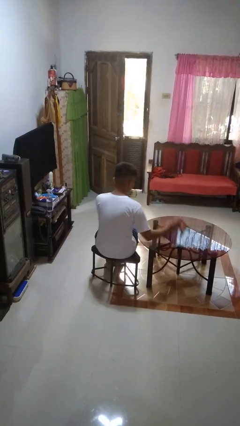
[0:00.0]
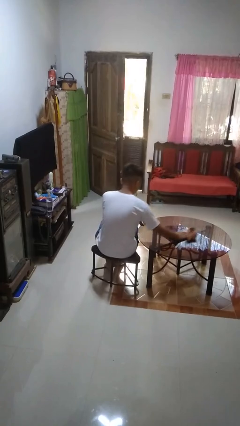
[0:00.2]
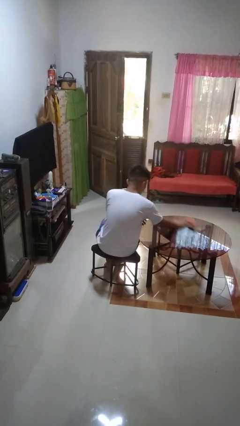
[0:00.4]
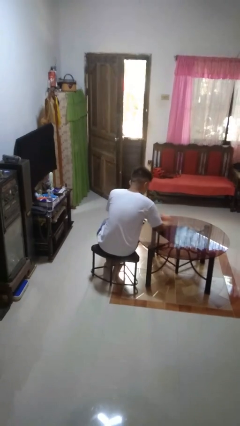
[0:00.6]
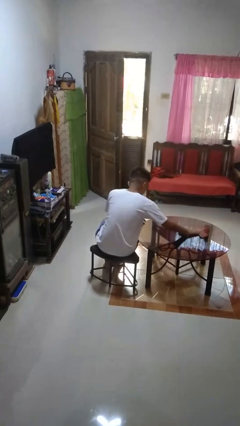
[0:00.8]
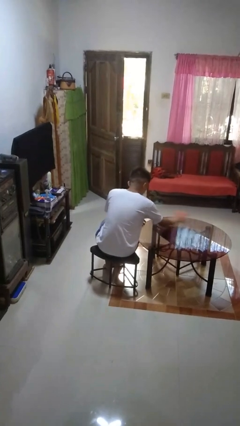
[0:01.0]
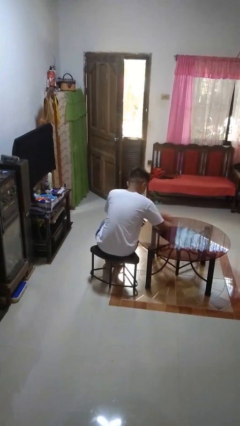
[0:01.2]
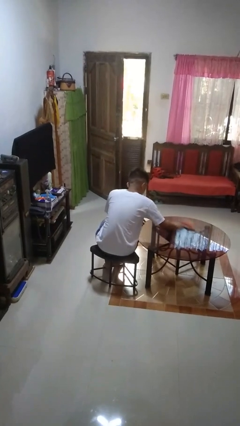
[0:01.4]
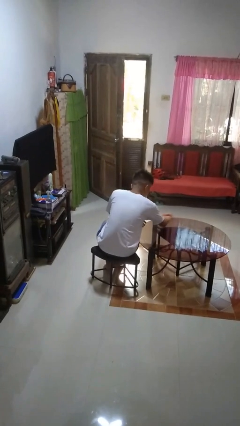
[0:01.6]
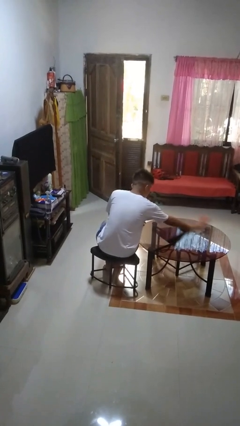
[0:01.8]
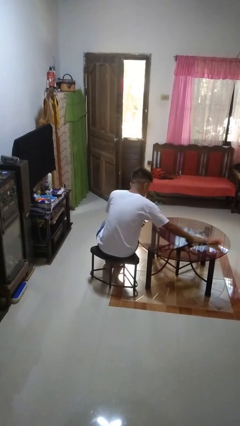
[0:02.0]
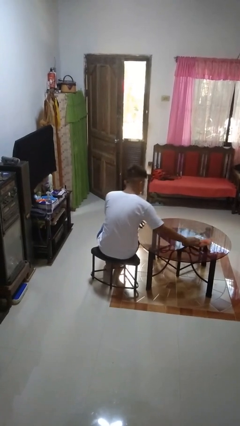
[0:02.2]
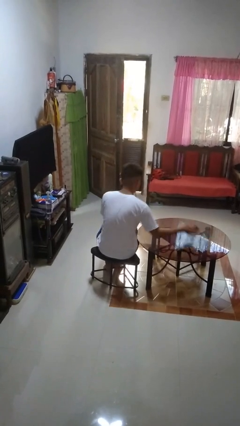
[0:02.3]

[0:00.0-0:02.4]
person cleans table with rag

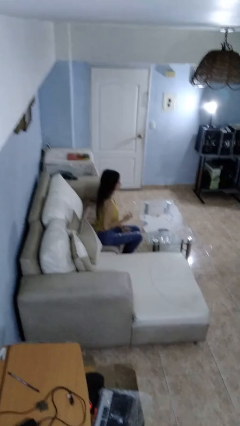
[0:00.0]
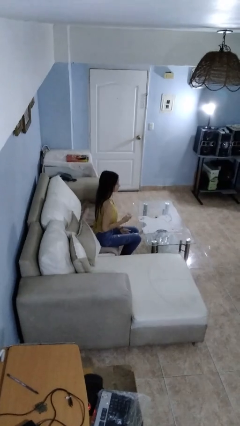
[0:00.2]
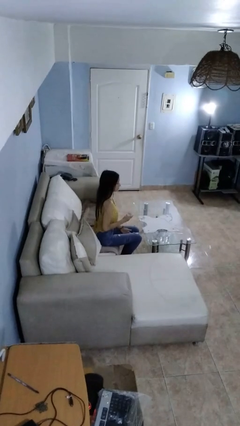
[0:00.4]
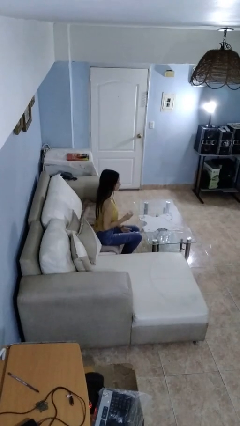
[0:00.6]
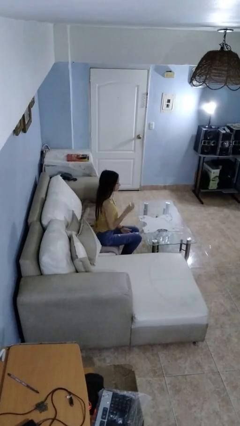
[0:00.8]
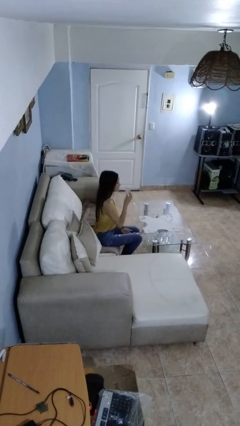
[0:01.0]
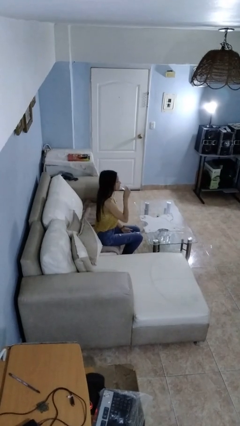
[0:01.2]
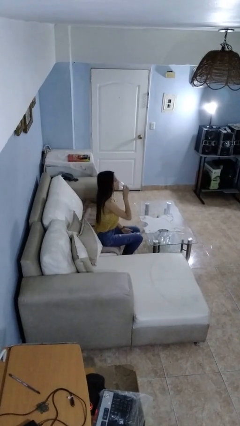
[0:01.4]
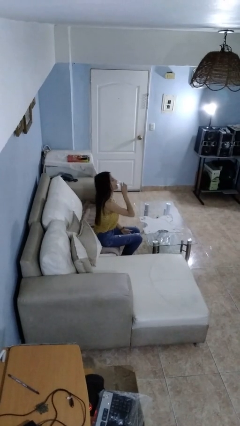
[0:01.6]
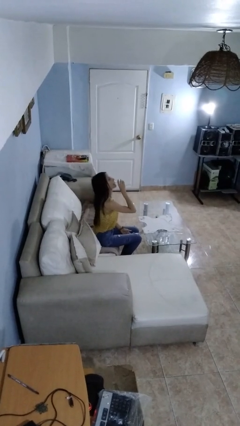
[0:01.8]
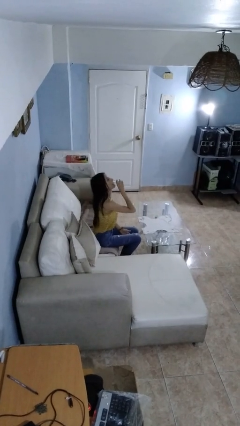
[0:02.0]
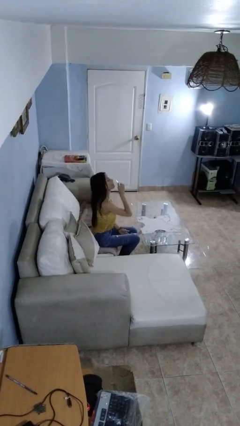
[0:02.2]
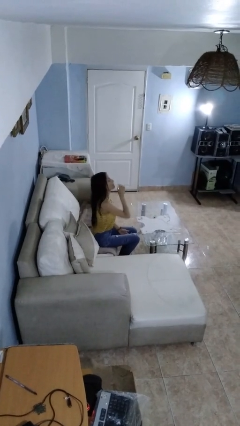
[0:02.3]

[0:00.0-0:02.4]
person drinks from shotglass

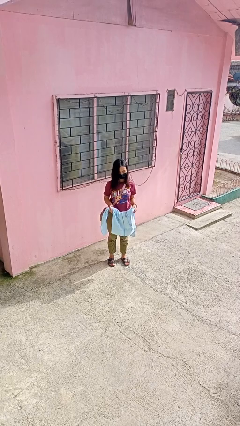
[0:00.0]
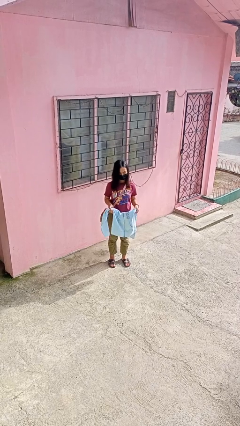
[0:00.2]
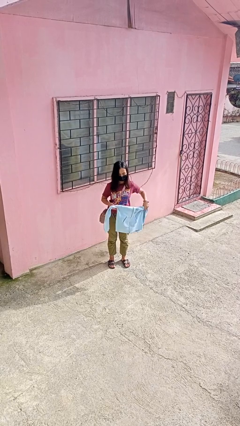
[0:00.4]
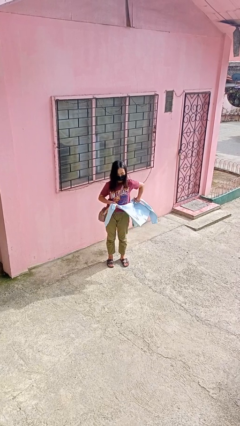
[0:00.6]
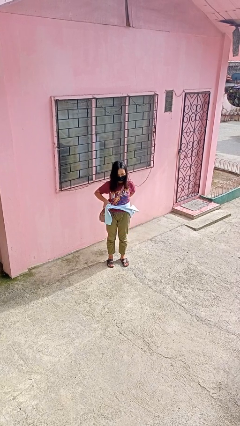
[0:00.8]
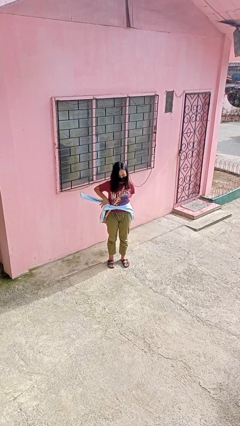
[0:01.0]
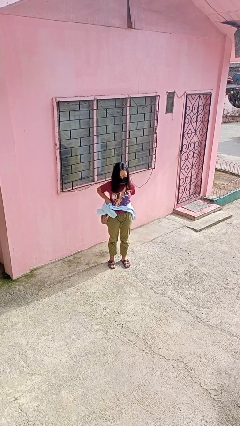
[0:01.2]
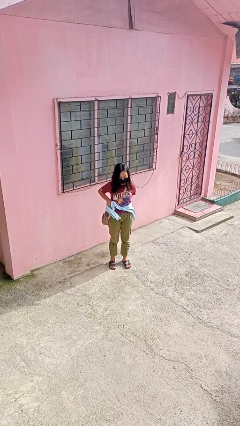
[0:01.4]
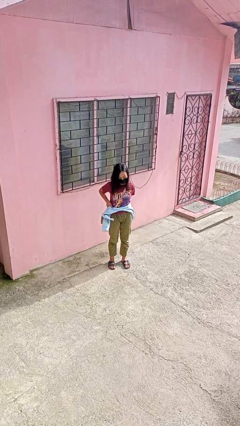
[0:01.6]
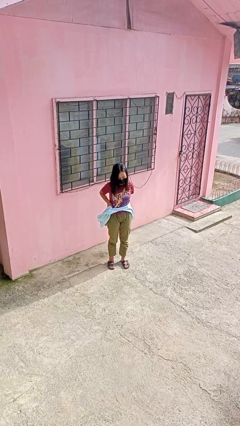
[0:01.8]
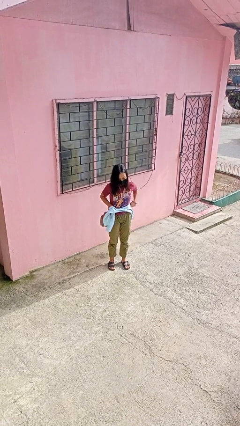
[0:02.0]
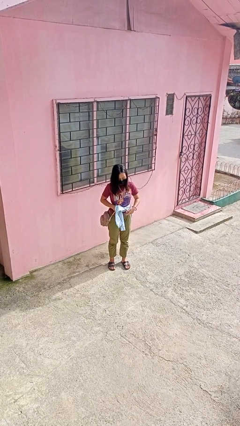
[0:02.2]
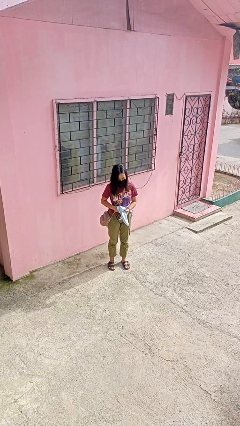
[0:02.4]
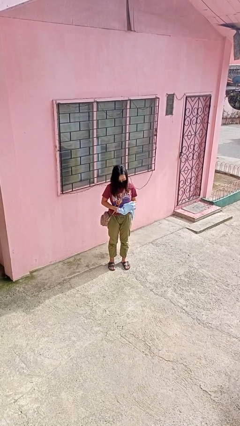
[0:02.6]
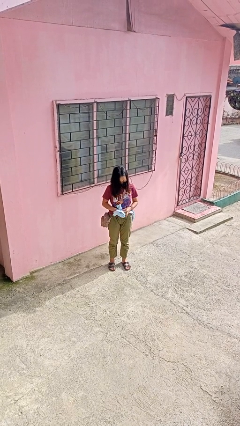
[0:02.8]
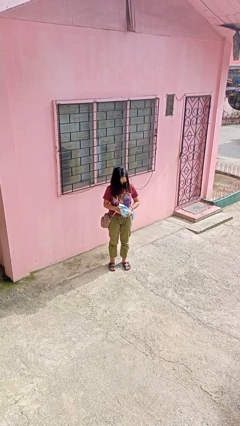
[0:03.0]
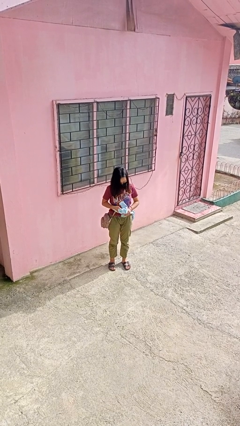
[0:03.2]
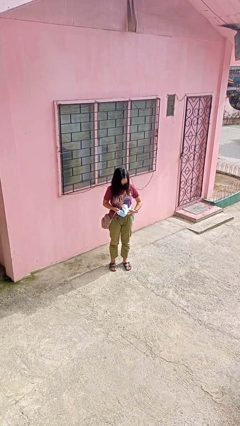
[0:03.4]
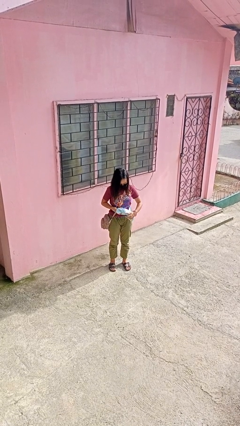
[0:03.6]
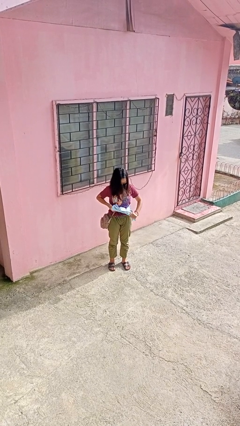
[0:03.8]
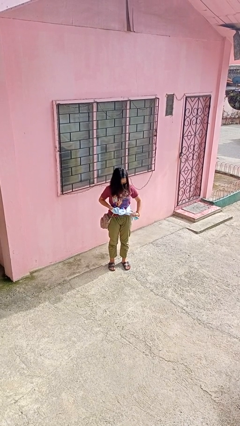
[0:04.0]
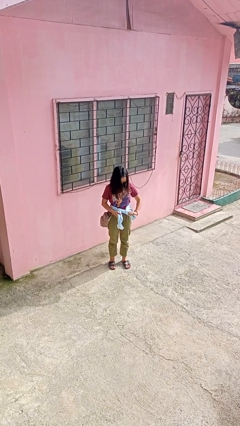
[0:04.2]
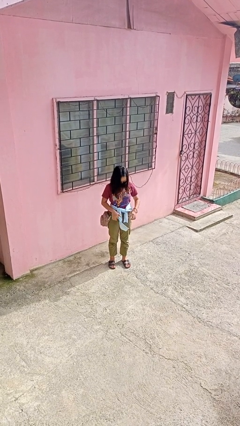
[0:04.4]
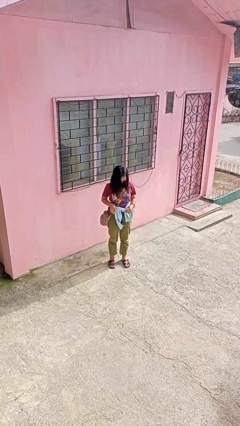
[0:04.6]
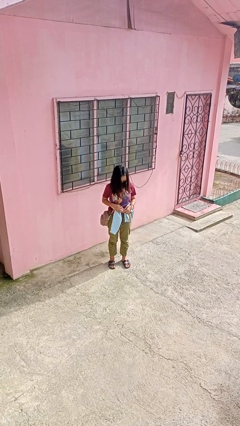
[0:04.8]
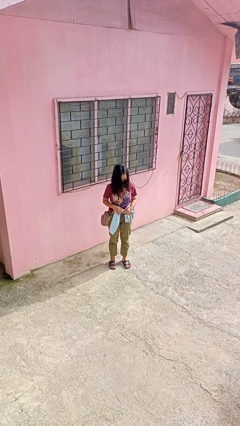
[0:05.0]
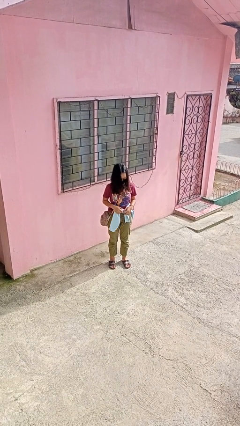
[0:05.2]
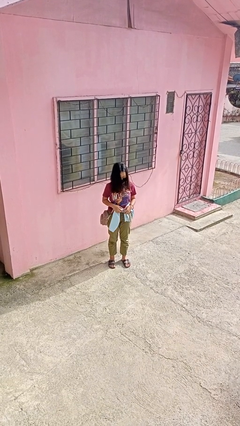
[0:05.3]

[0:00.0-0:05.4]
person ties jacket around waist

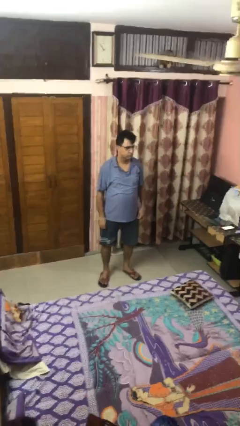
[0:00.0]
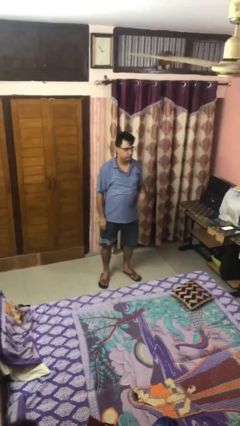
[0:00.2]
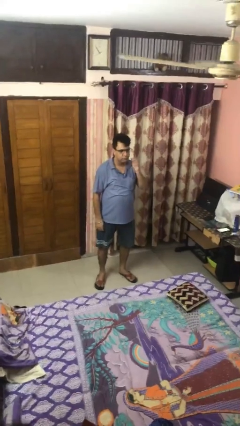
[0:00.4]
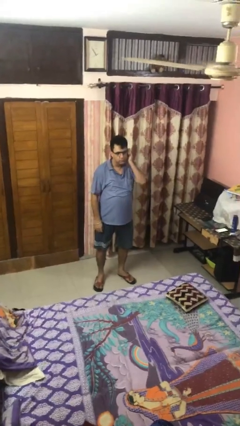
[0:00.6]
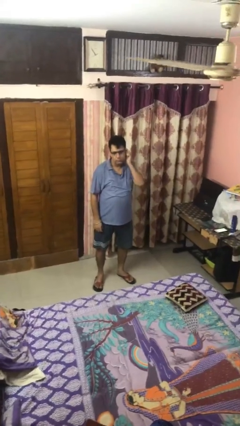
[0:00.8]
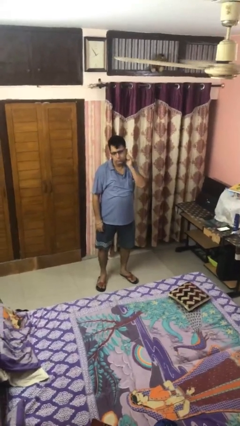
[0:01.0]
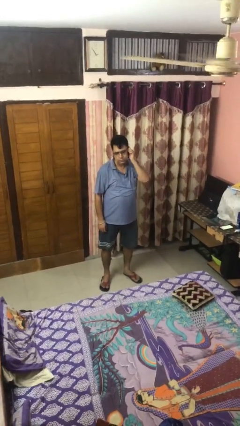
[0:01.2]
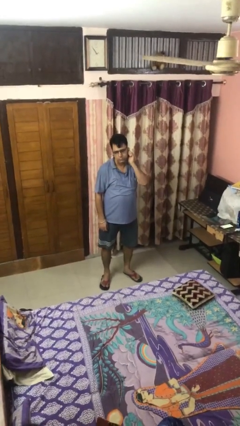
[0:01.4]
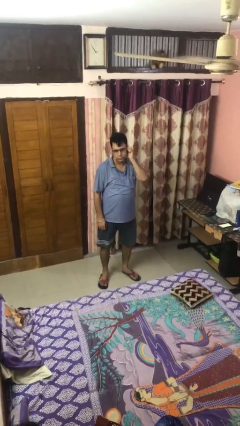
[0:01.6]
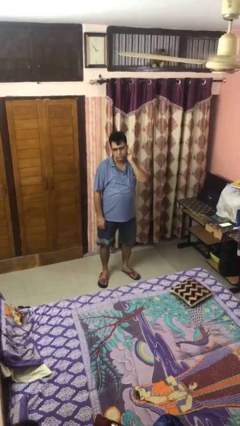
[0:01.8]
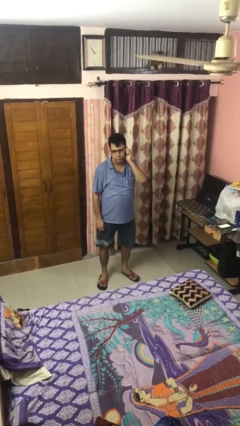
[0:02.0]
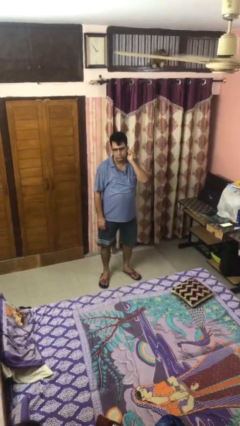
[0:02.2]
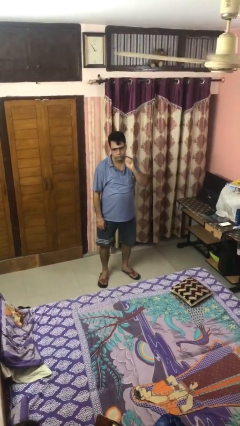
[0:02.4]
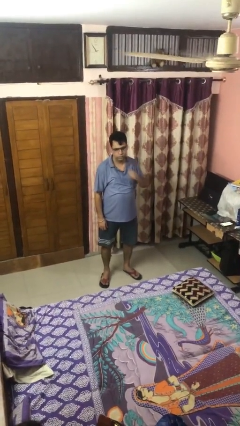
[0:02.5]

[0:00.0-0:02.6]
person touches earlobe

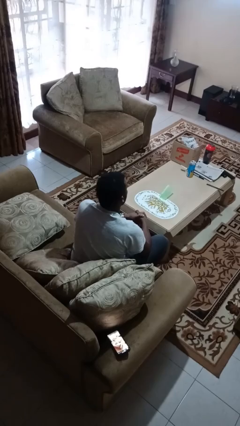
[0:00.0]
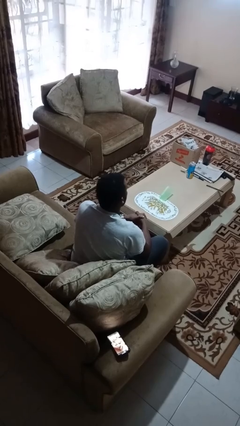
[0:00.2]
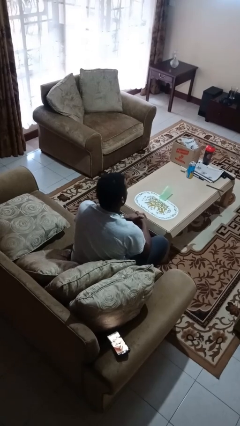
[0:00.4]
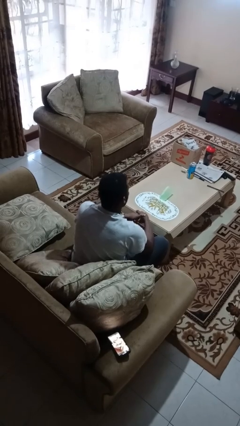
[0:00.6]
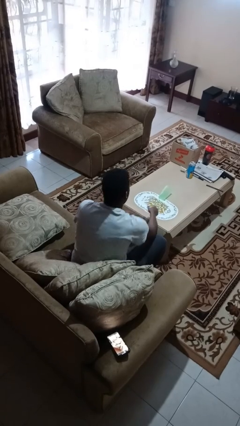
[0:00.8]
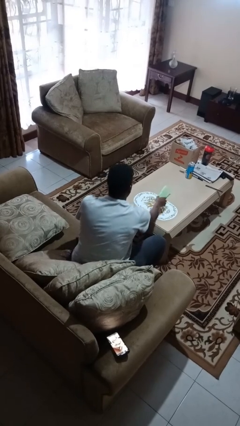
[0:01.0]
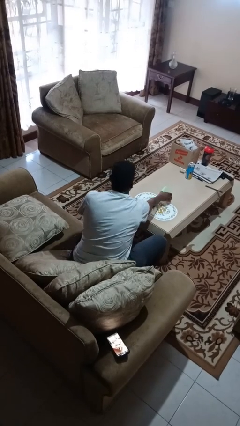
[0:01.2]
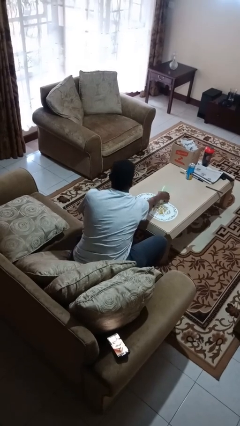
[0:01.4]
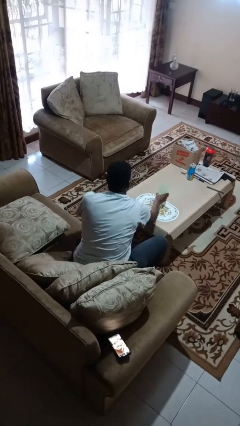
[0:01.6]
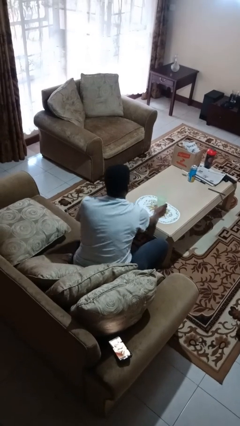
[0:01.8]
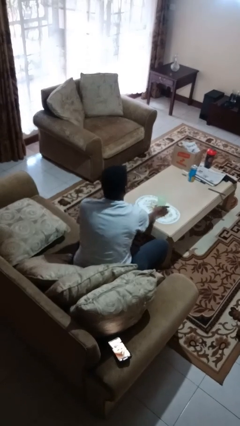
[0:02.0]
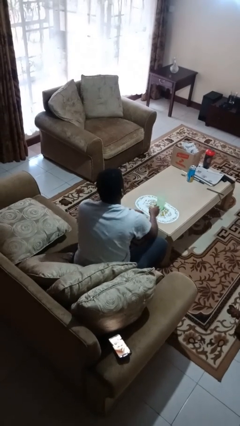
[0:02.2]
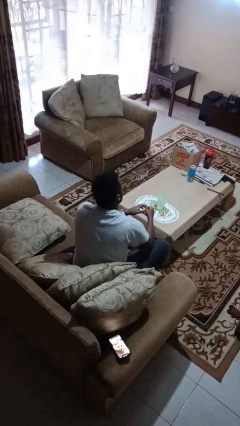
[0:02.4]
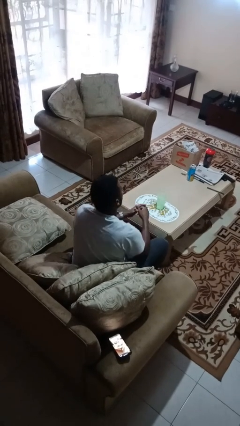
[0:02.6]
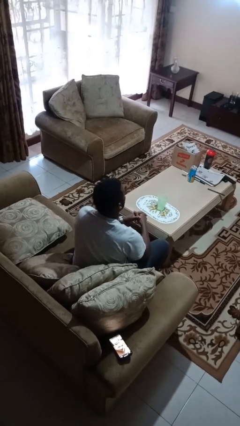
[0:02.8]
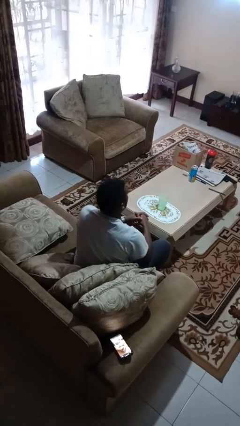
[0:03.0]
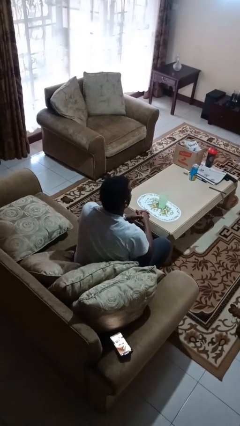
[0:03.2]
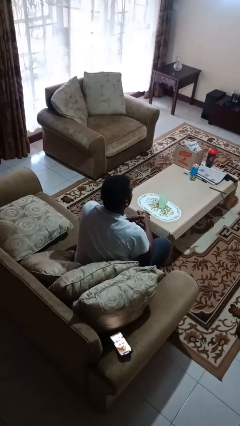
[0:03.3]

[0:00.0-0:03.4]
person sets upright glass

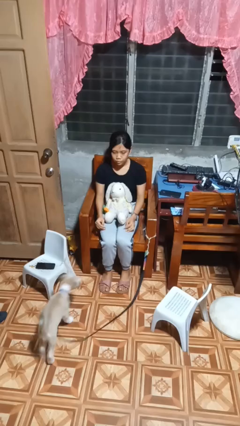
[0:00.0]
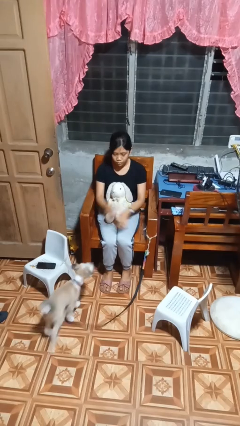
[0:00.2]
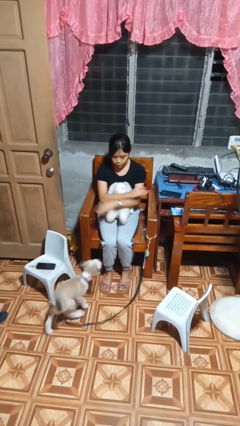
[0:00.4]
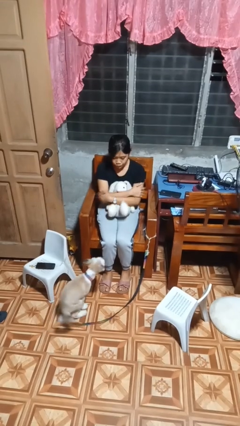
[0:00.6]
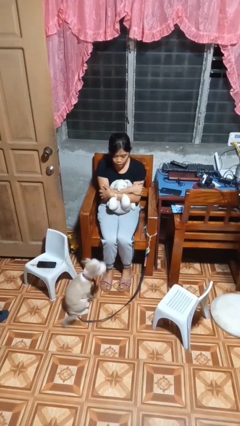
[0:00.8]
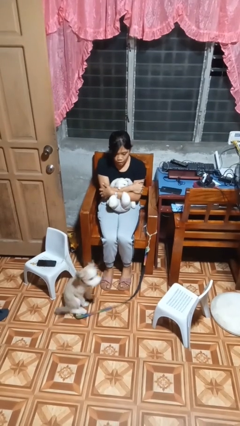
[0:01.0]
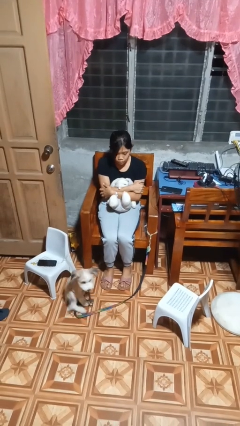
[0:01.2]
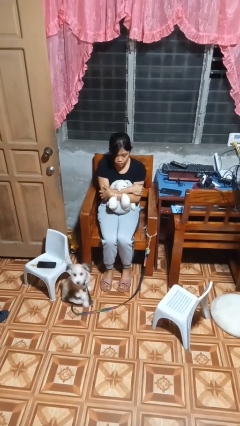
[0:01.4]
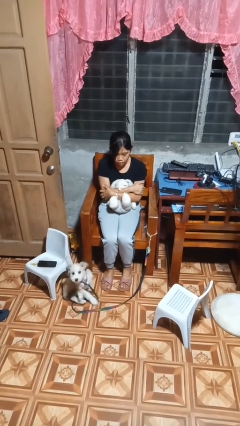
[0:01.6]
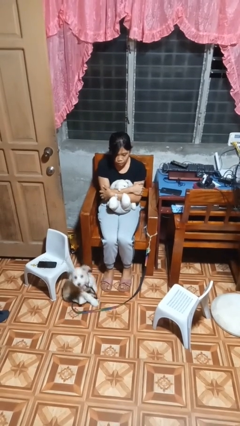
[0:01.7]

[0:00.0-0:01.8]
person hugs stuffed animal
